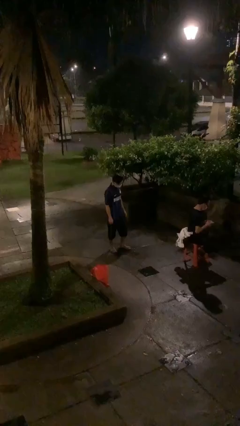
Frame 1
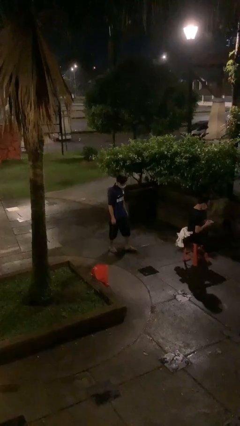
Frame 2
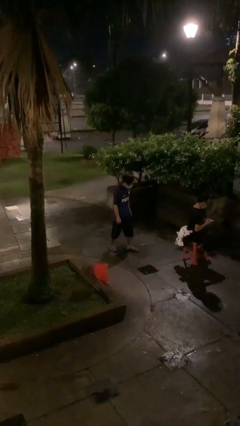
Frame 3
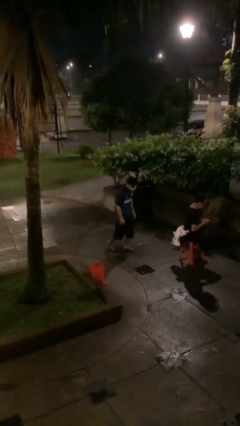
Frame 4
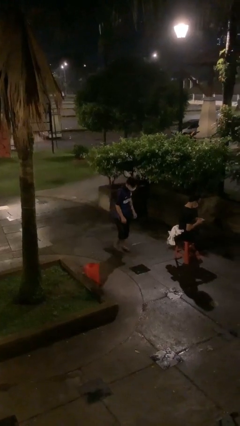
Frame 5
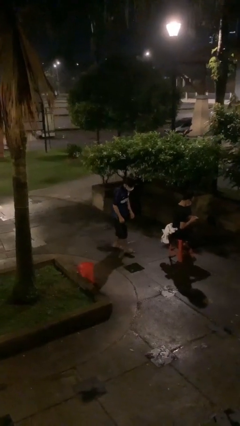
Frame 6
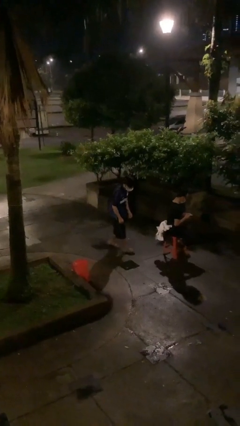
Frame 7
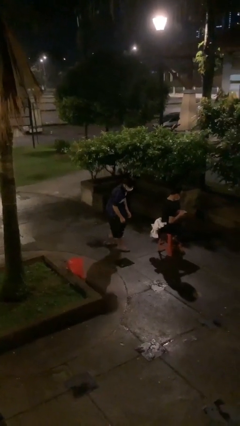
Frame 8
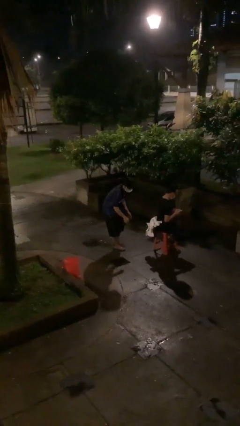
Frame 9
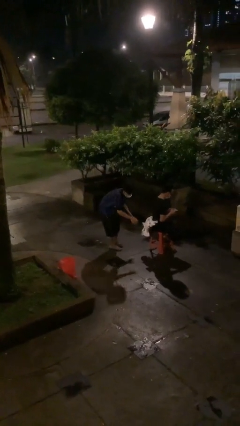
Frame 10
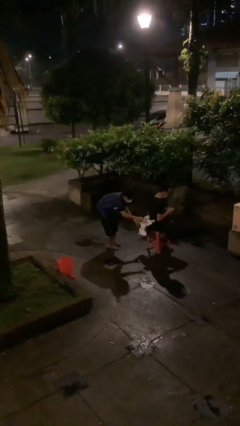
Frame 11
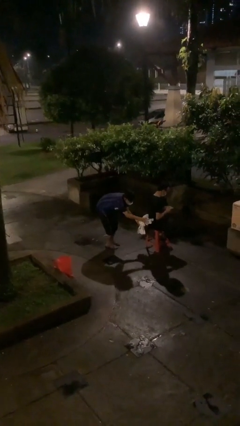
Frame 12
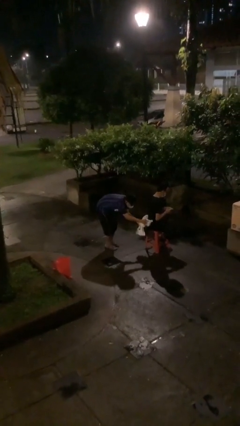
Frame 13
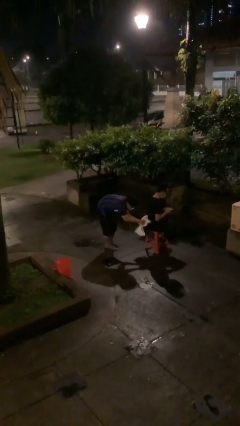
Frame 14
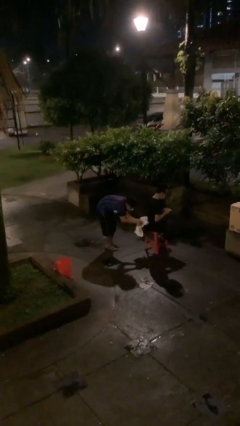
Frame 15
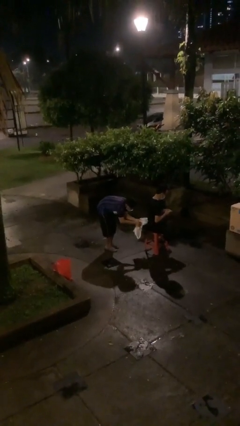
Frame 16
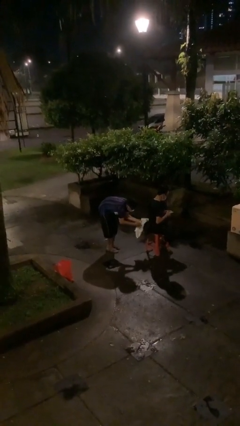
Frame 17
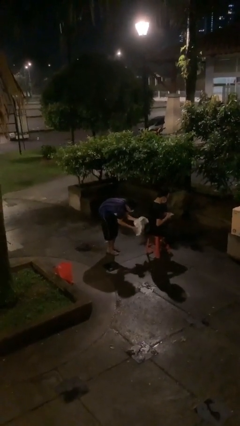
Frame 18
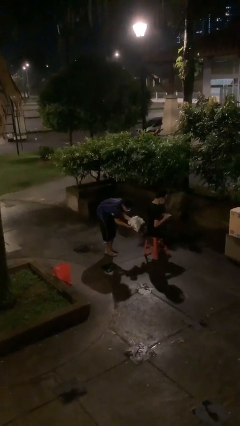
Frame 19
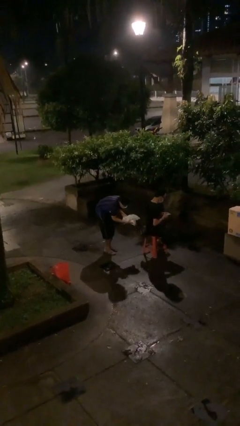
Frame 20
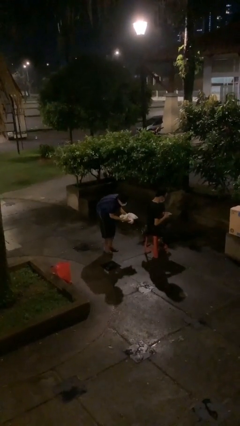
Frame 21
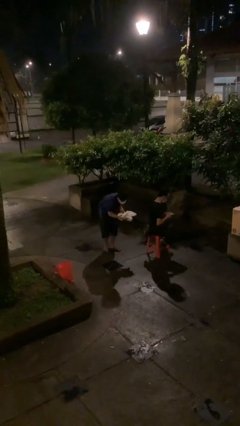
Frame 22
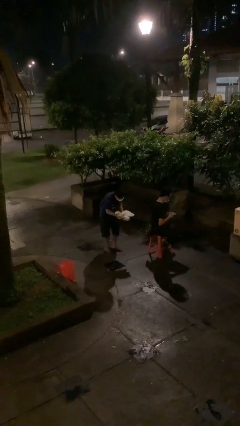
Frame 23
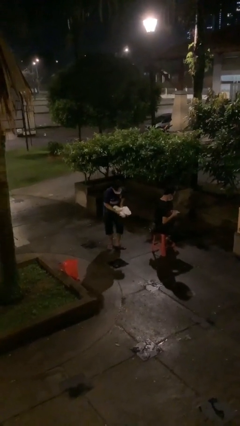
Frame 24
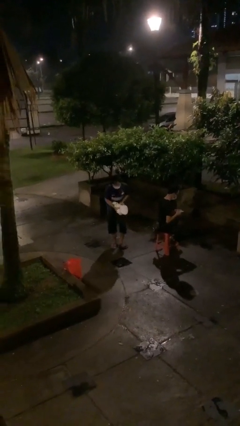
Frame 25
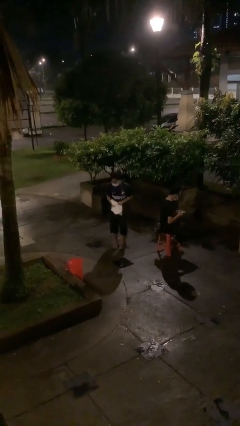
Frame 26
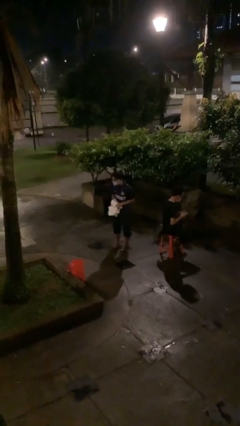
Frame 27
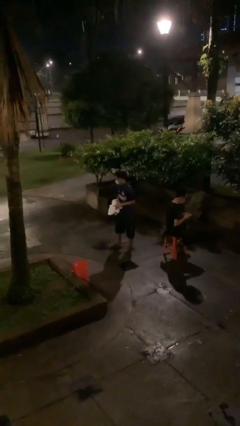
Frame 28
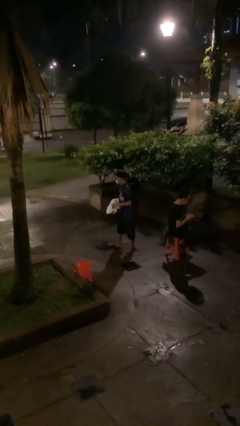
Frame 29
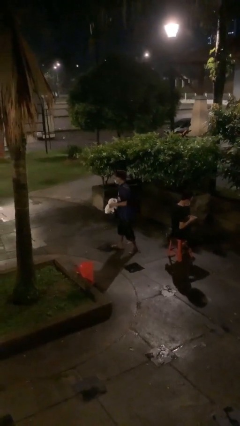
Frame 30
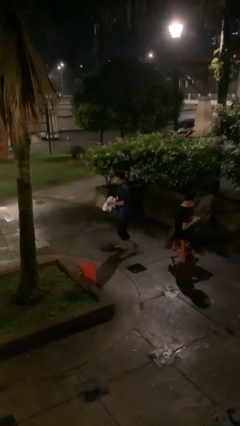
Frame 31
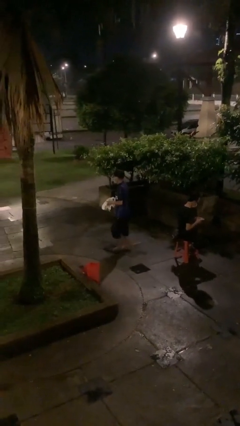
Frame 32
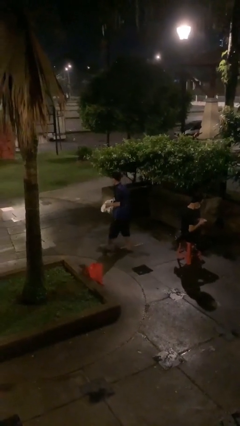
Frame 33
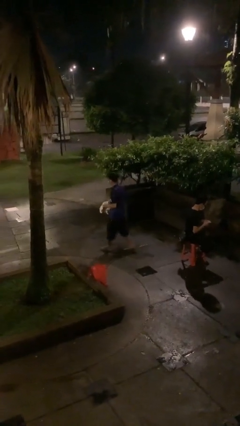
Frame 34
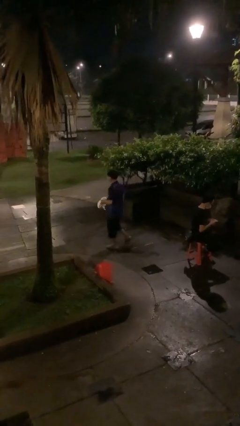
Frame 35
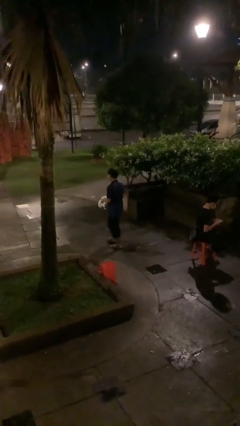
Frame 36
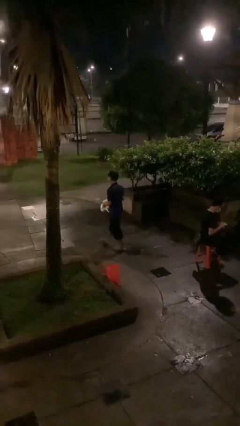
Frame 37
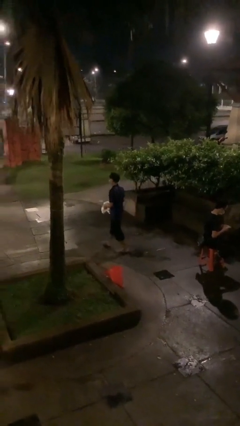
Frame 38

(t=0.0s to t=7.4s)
person steals object from person

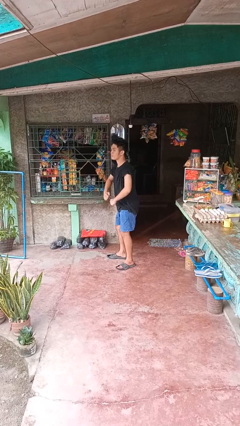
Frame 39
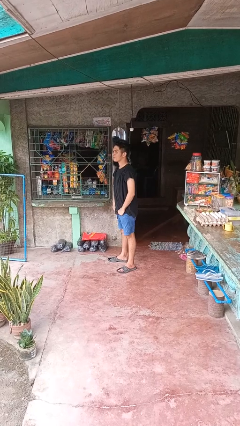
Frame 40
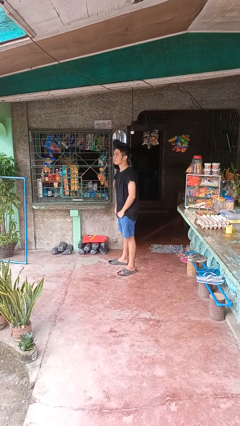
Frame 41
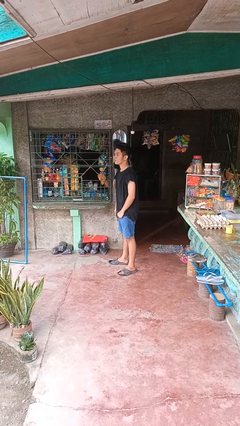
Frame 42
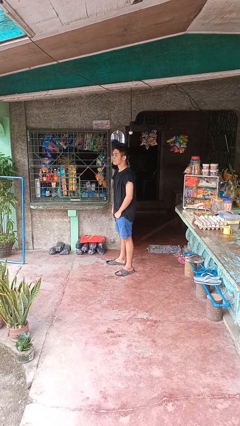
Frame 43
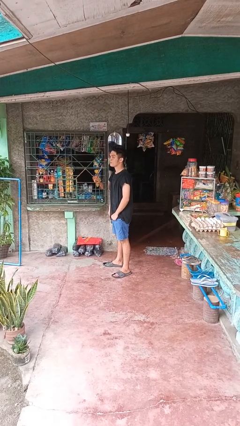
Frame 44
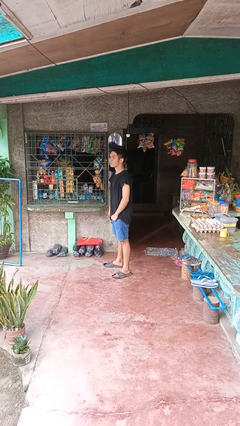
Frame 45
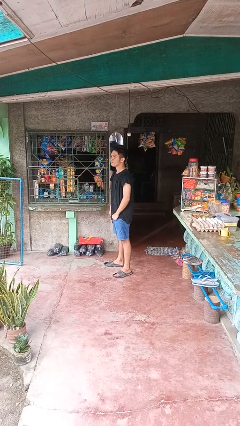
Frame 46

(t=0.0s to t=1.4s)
person stands up

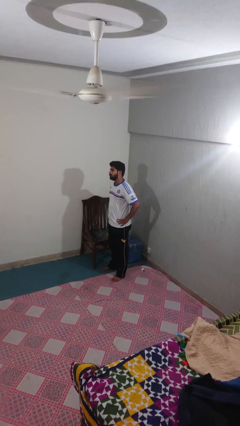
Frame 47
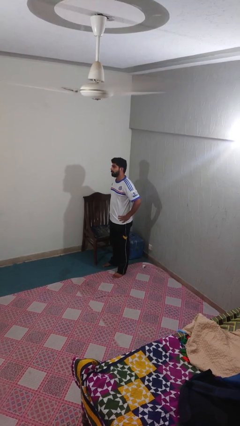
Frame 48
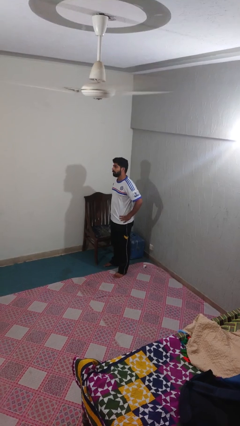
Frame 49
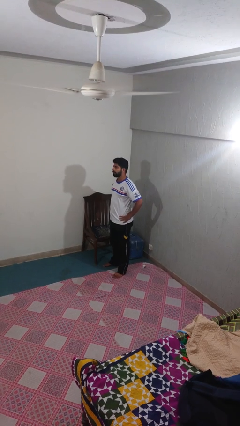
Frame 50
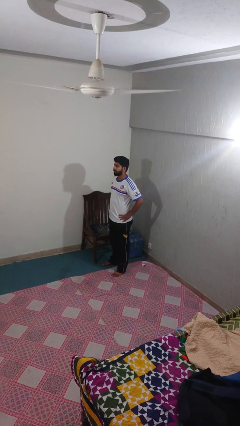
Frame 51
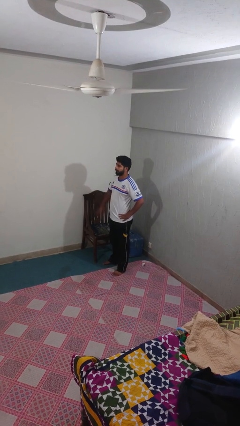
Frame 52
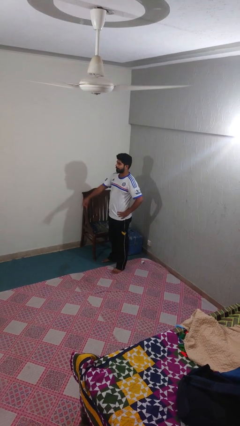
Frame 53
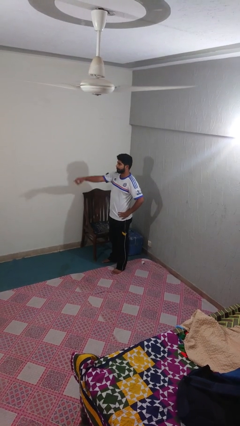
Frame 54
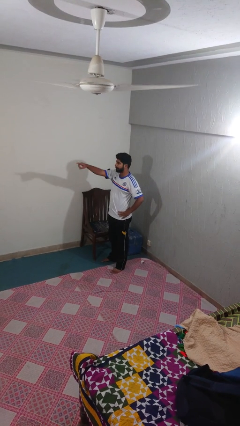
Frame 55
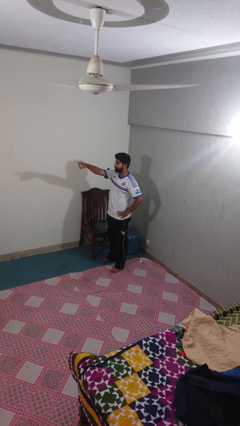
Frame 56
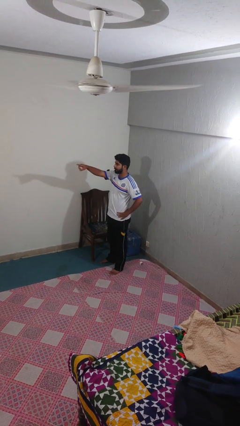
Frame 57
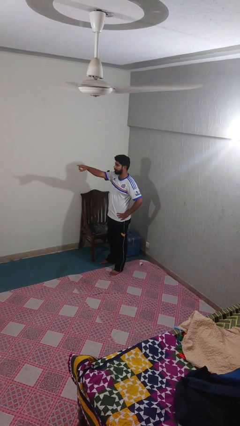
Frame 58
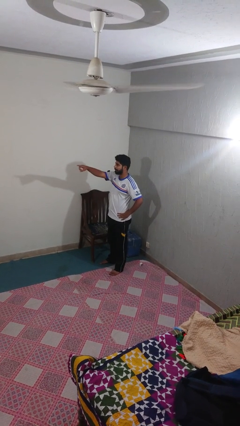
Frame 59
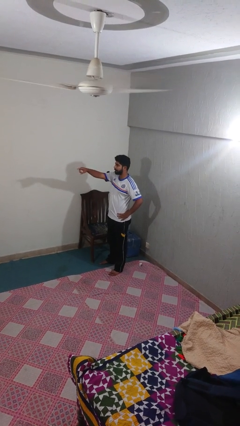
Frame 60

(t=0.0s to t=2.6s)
person points at person

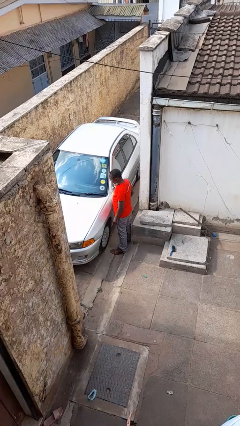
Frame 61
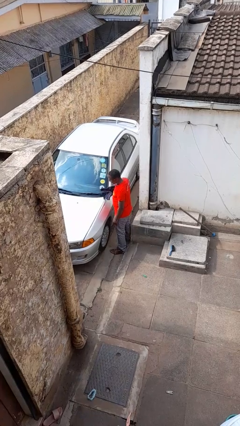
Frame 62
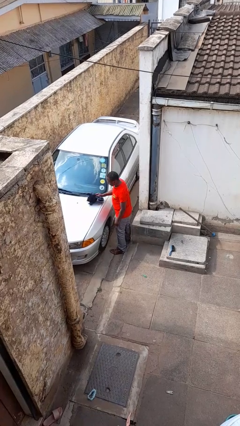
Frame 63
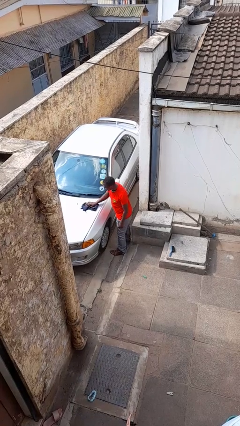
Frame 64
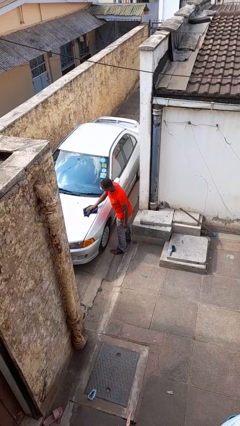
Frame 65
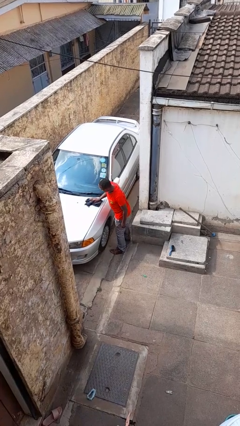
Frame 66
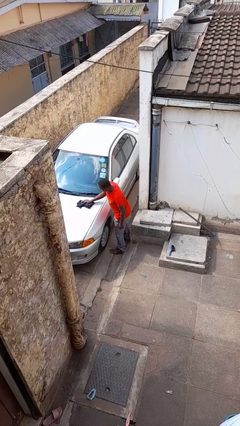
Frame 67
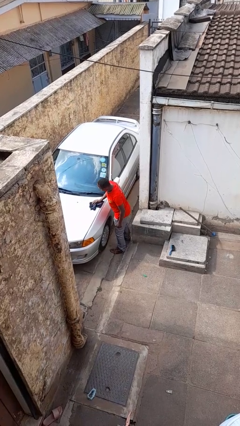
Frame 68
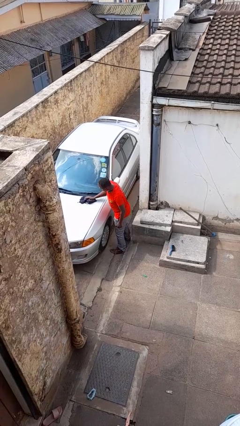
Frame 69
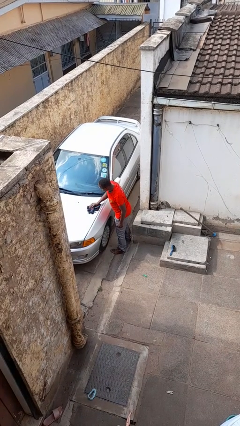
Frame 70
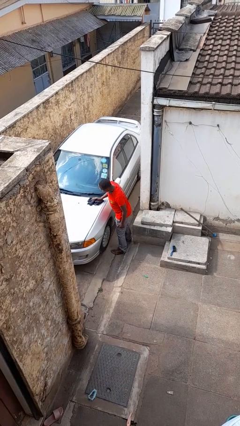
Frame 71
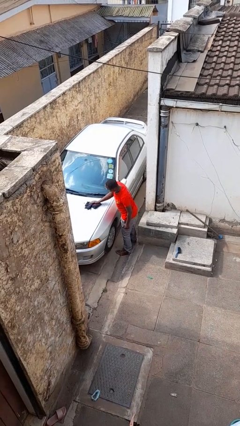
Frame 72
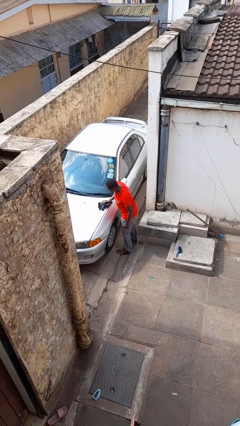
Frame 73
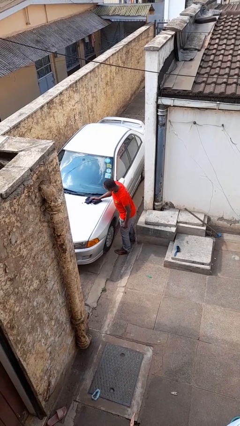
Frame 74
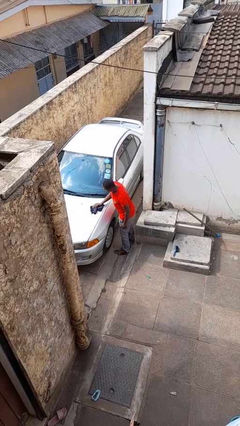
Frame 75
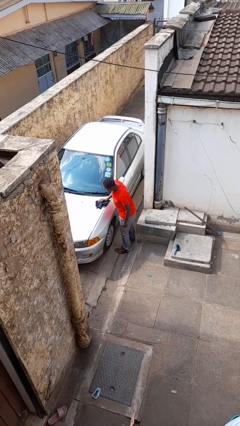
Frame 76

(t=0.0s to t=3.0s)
person polishes car with rag

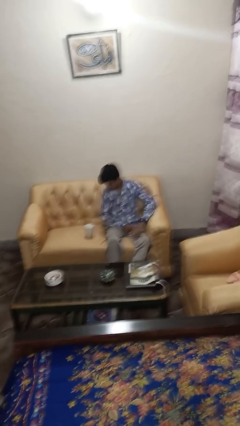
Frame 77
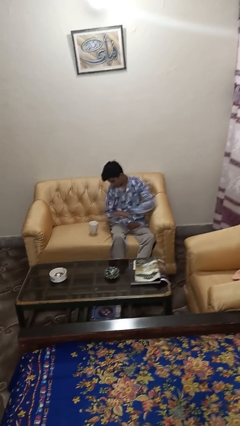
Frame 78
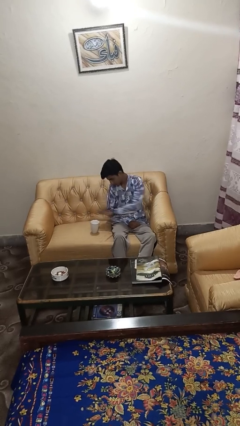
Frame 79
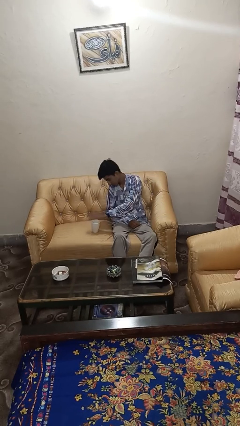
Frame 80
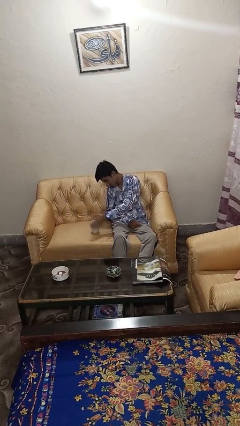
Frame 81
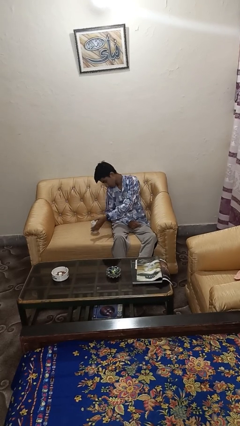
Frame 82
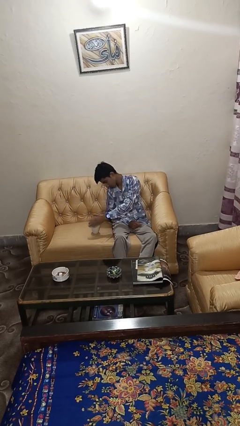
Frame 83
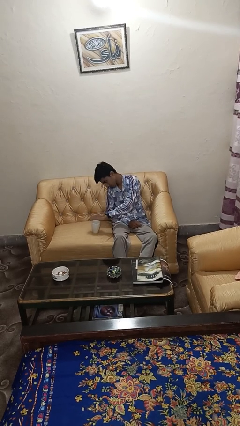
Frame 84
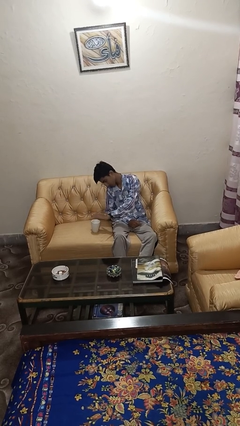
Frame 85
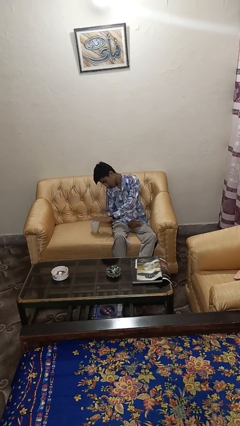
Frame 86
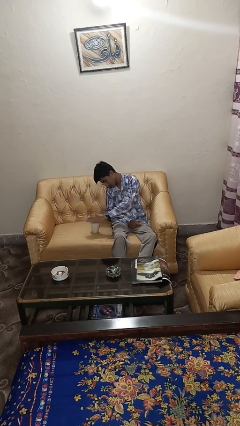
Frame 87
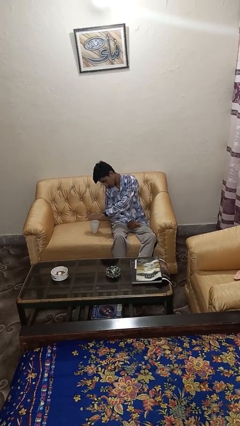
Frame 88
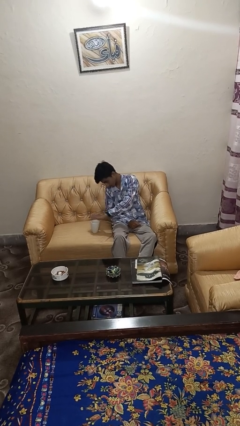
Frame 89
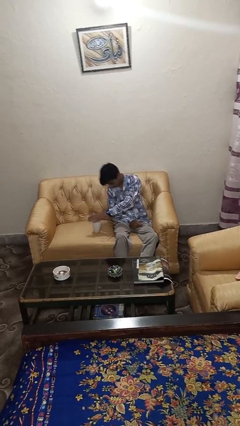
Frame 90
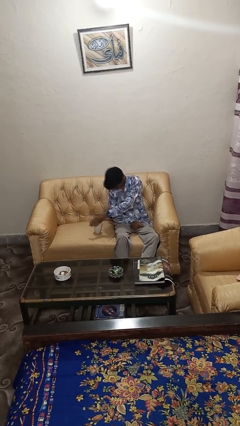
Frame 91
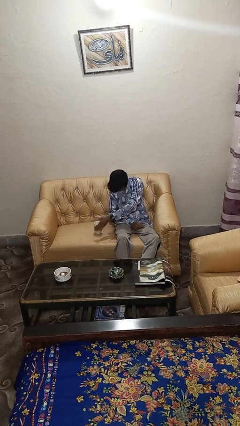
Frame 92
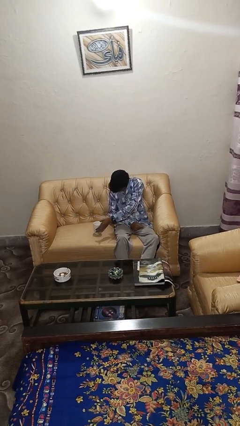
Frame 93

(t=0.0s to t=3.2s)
person waves hand over object
